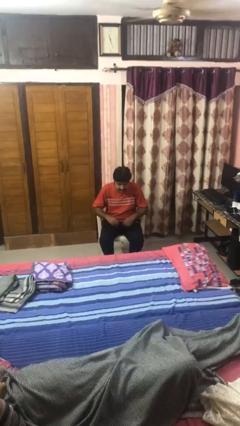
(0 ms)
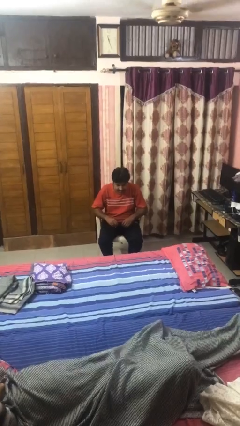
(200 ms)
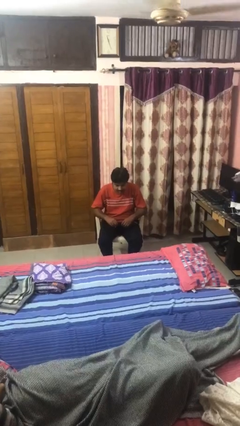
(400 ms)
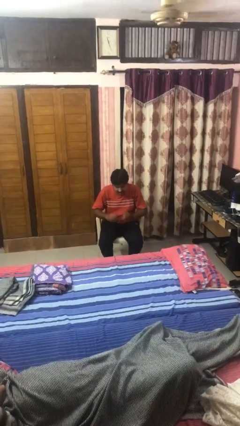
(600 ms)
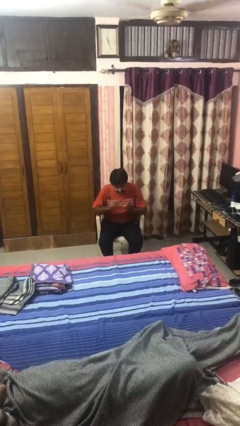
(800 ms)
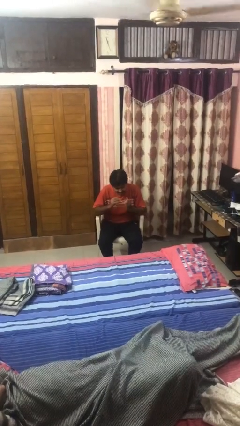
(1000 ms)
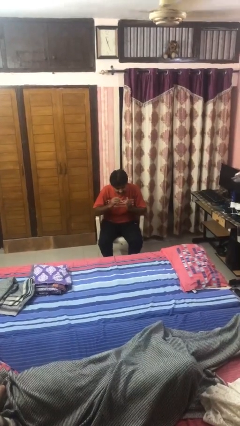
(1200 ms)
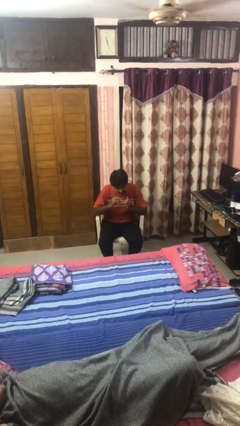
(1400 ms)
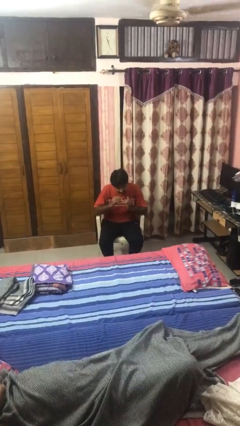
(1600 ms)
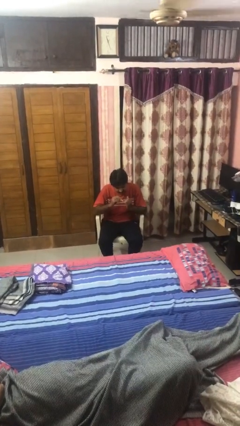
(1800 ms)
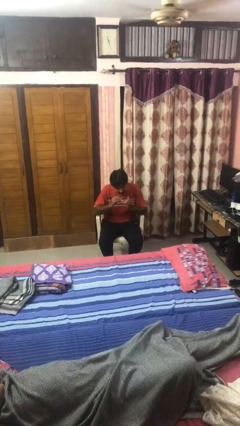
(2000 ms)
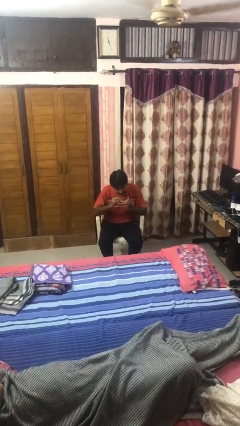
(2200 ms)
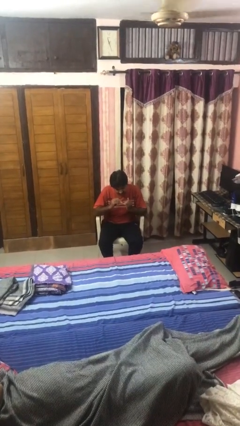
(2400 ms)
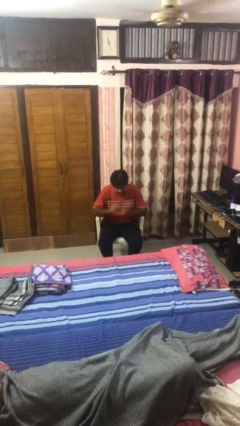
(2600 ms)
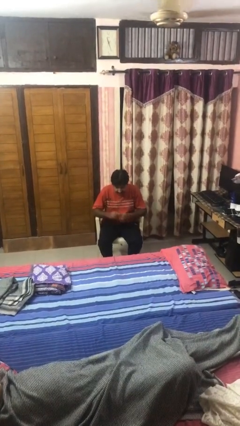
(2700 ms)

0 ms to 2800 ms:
person clips fingernails

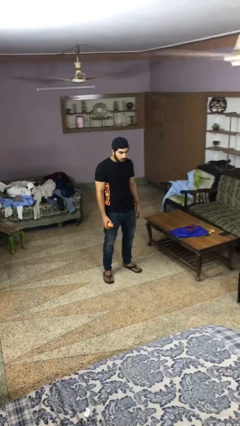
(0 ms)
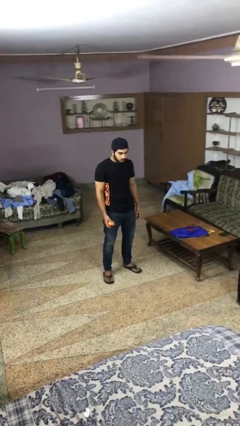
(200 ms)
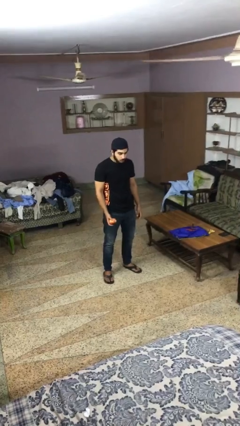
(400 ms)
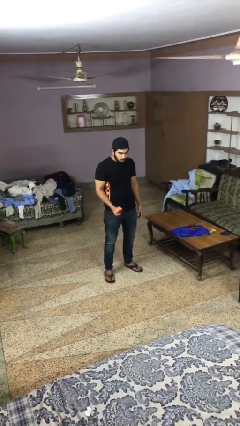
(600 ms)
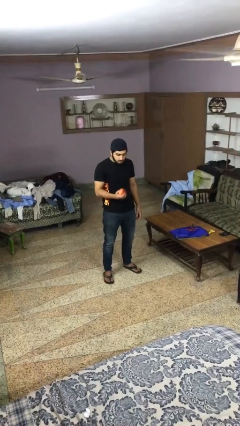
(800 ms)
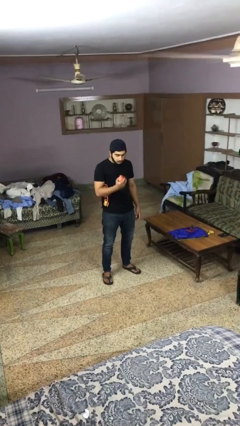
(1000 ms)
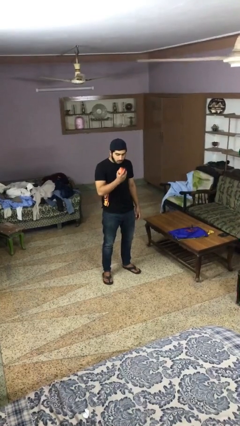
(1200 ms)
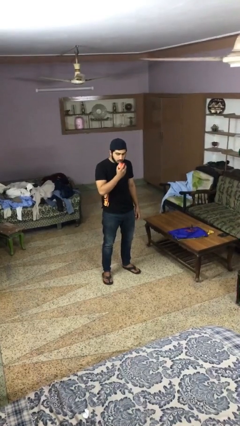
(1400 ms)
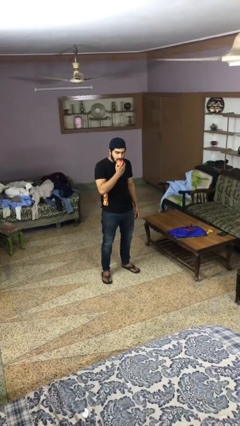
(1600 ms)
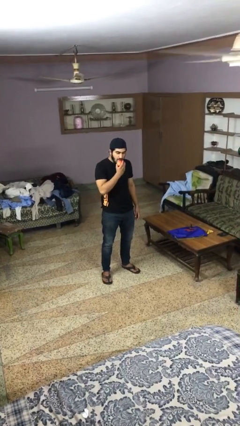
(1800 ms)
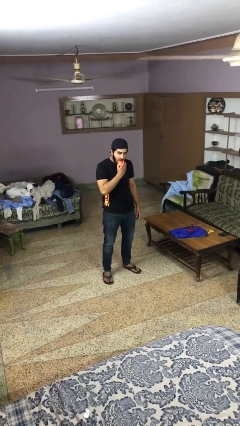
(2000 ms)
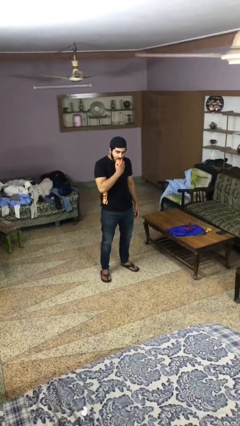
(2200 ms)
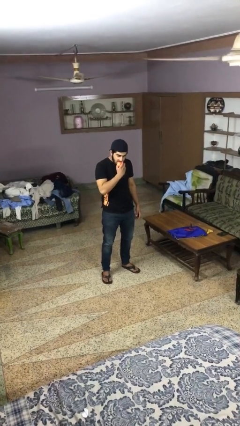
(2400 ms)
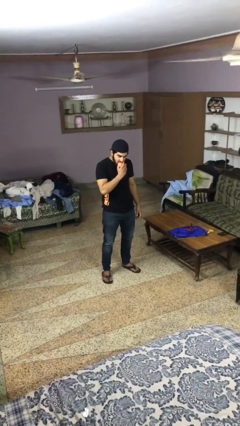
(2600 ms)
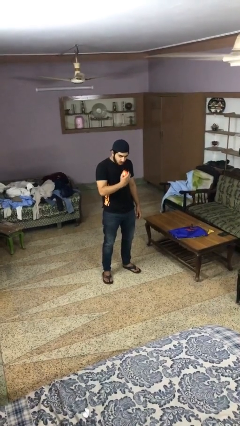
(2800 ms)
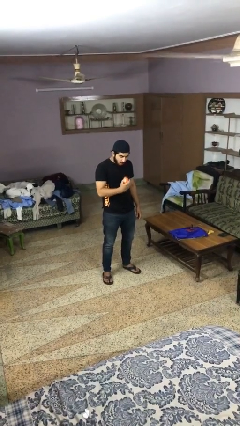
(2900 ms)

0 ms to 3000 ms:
person eats apple

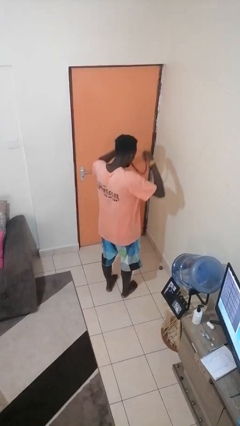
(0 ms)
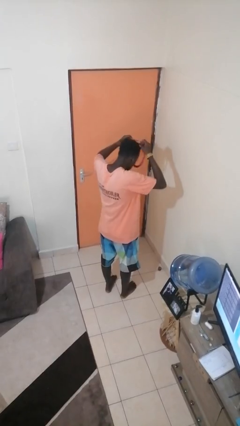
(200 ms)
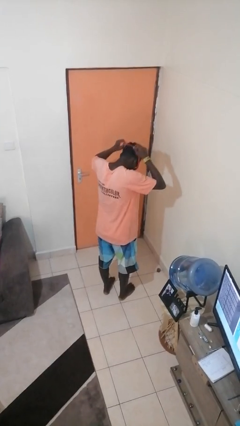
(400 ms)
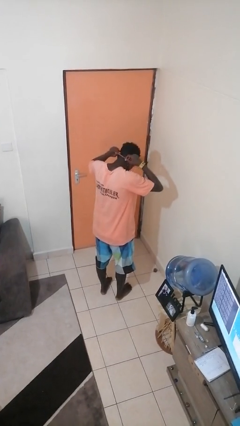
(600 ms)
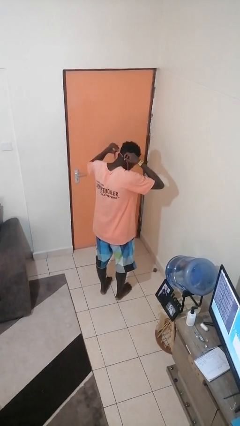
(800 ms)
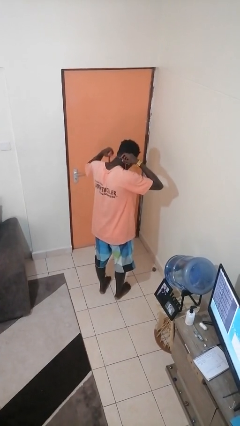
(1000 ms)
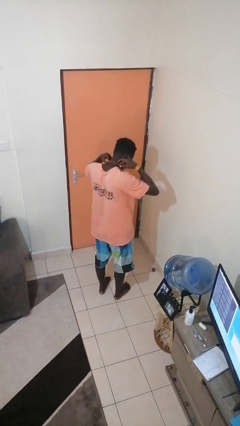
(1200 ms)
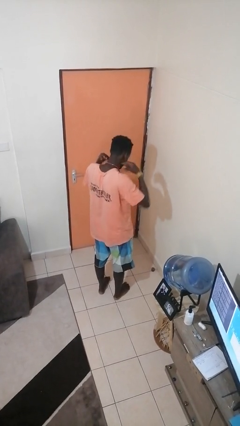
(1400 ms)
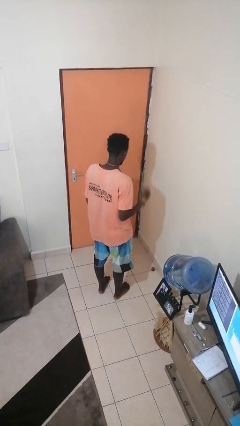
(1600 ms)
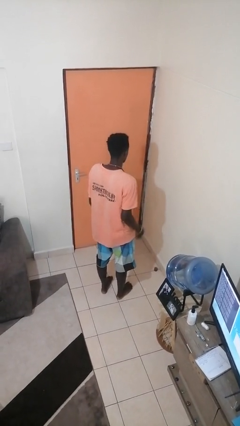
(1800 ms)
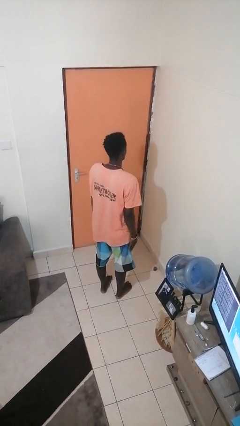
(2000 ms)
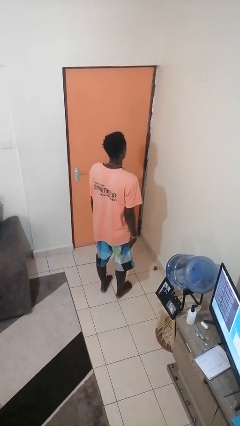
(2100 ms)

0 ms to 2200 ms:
person puts on necklace

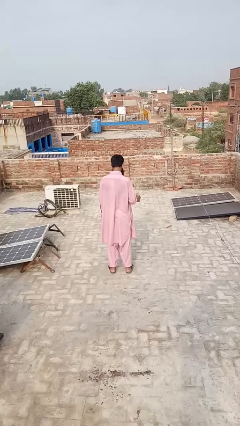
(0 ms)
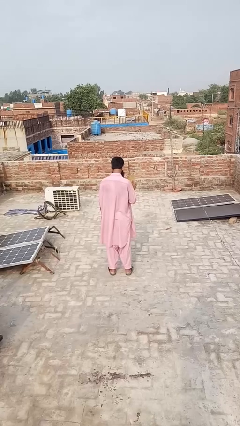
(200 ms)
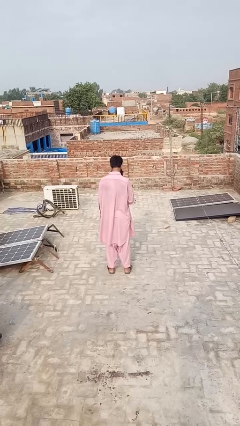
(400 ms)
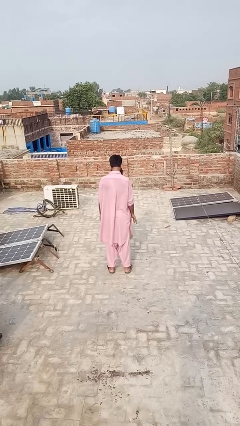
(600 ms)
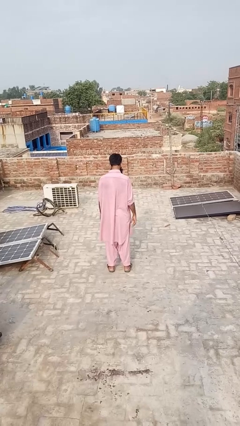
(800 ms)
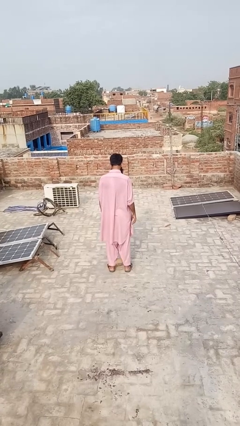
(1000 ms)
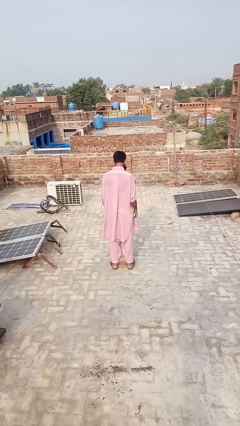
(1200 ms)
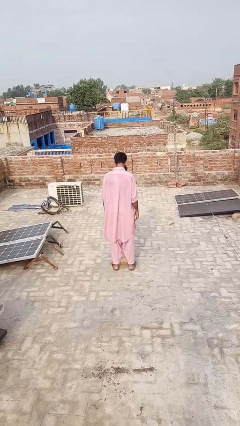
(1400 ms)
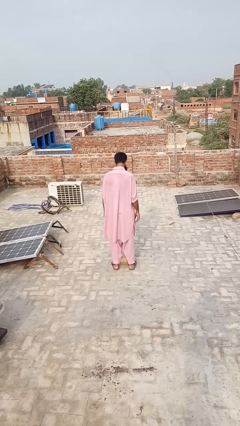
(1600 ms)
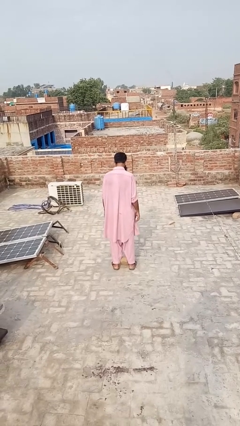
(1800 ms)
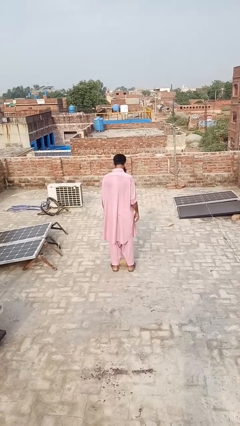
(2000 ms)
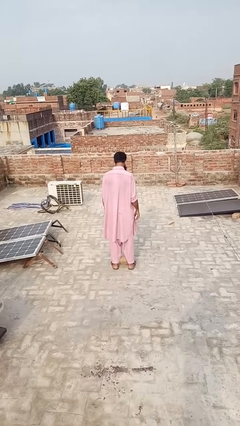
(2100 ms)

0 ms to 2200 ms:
person throws object to ground

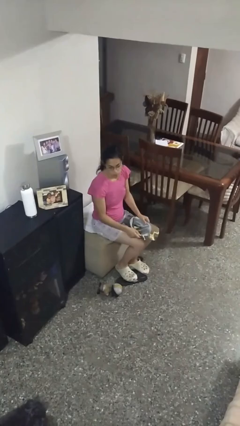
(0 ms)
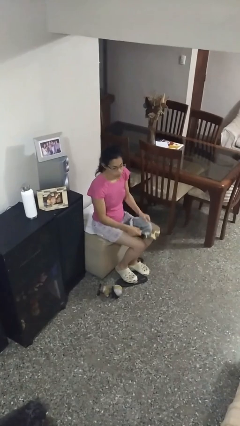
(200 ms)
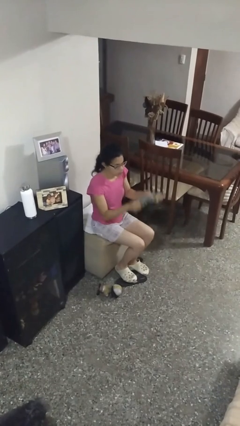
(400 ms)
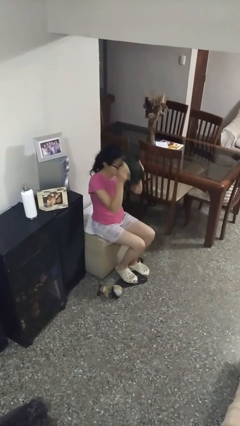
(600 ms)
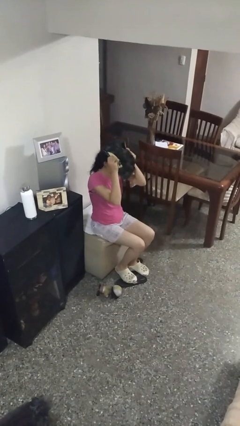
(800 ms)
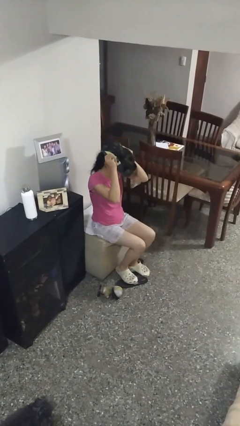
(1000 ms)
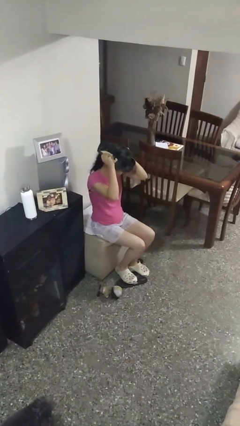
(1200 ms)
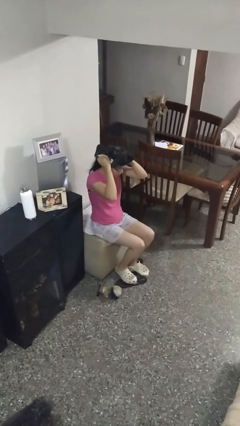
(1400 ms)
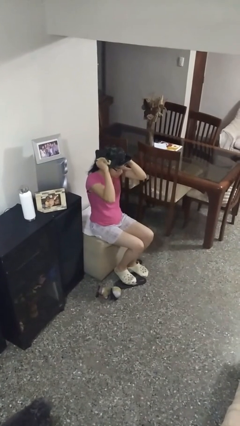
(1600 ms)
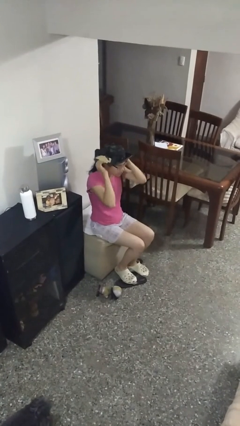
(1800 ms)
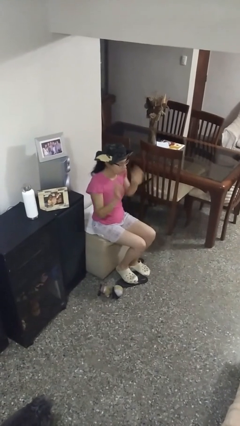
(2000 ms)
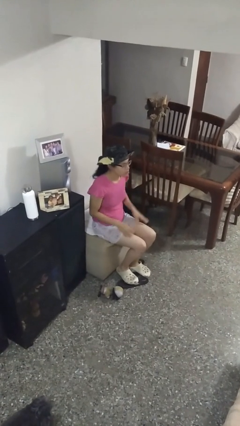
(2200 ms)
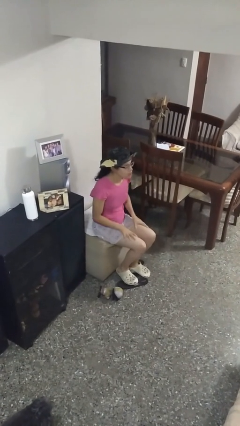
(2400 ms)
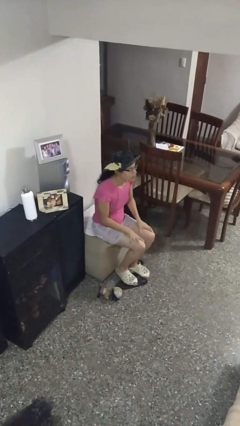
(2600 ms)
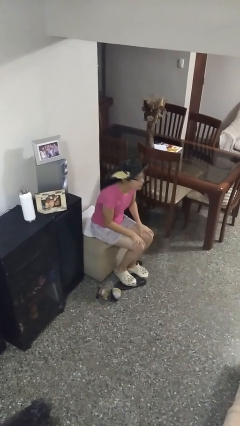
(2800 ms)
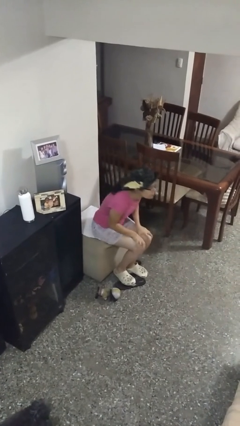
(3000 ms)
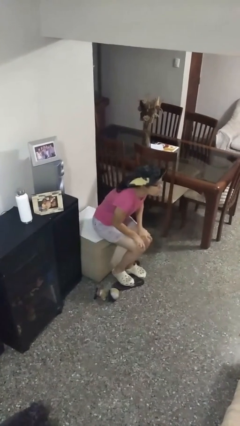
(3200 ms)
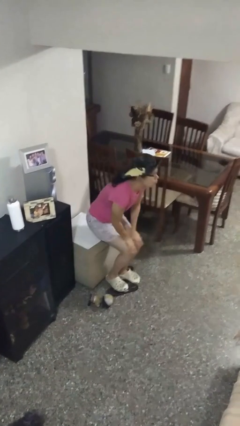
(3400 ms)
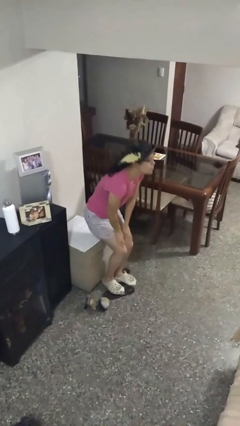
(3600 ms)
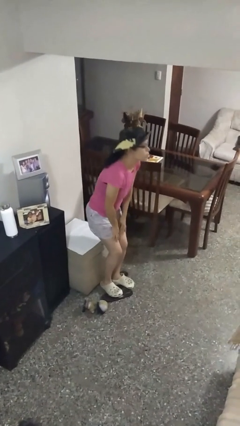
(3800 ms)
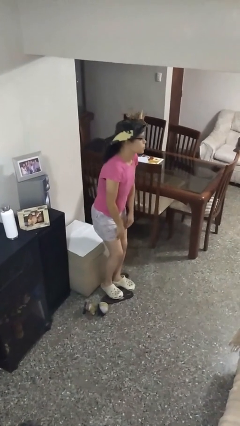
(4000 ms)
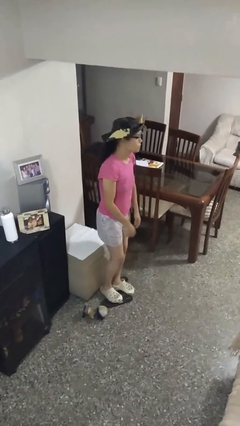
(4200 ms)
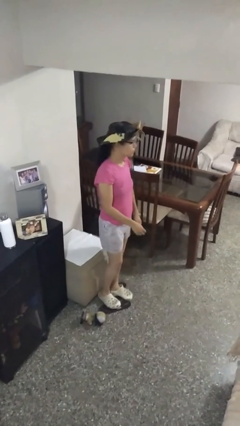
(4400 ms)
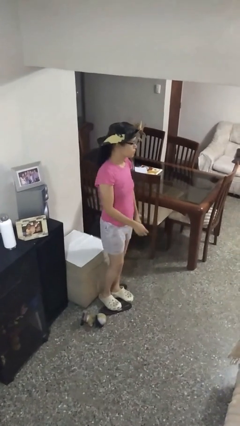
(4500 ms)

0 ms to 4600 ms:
person puts on hat

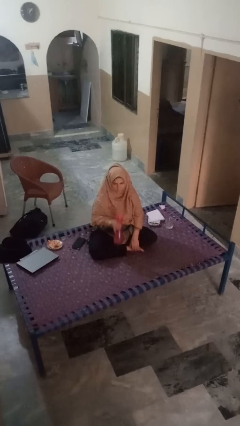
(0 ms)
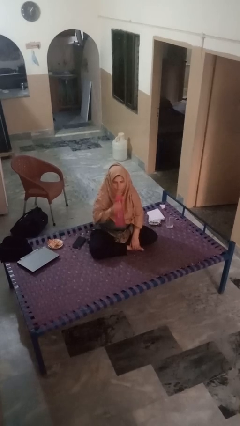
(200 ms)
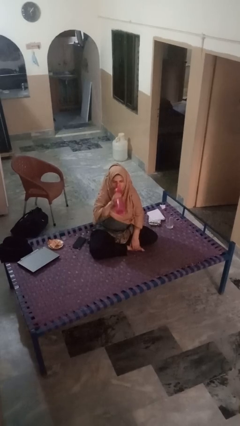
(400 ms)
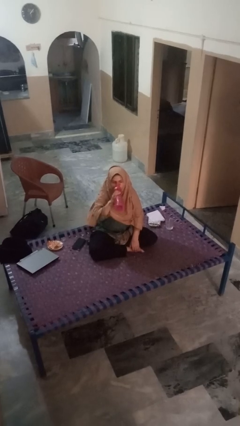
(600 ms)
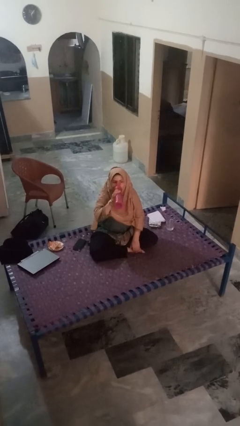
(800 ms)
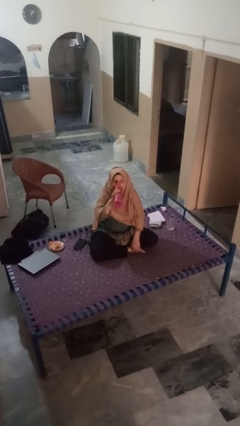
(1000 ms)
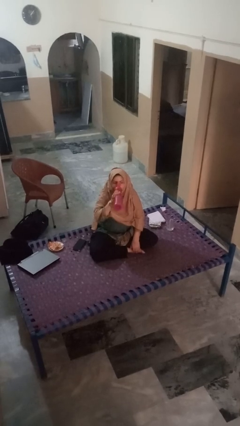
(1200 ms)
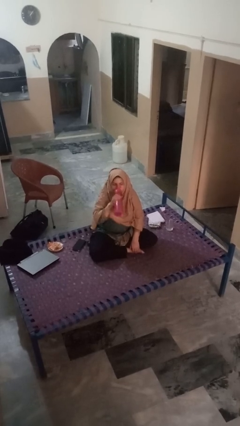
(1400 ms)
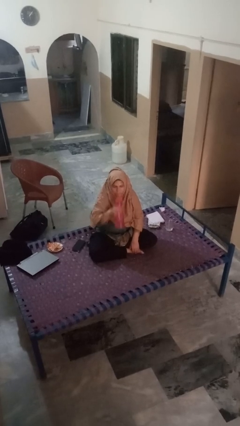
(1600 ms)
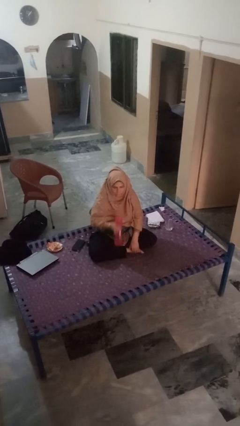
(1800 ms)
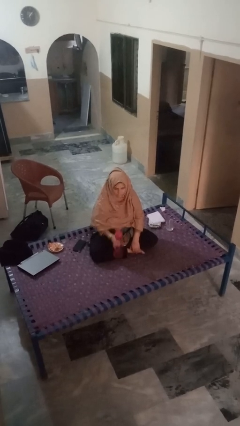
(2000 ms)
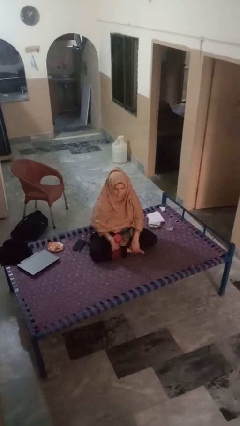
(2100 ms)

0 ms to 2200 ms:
person drinks from bottle
